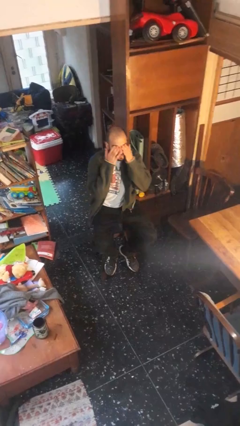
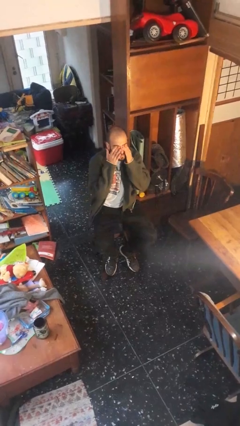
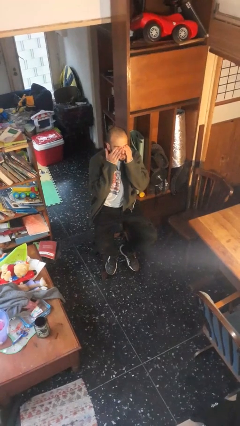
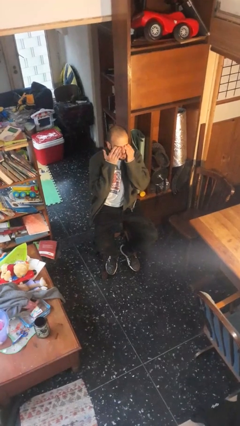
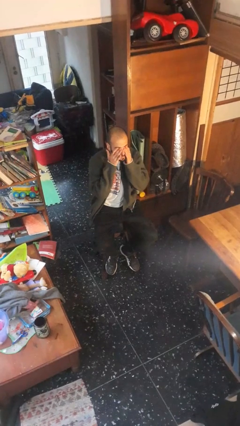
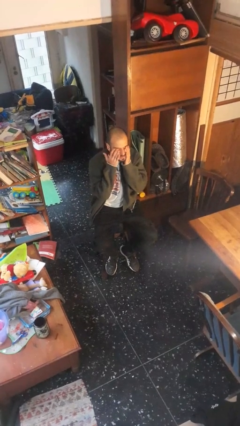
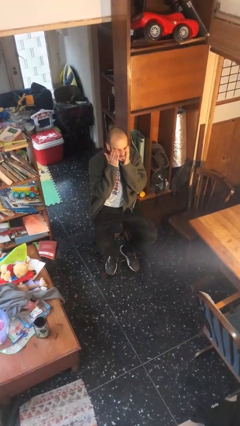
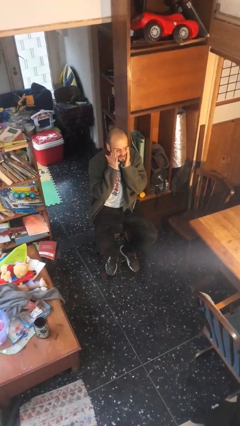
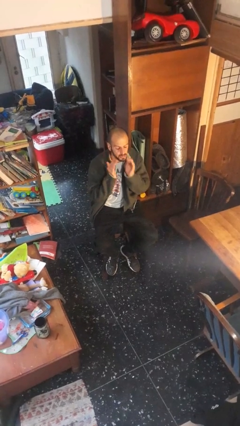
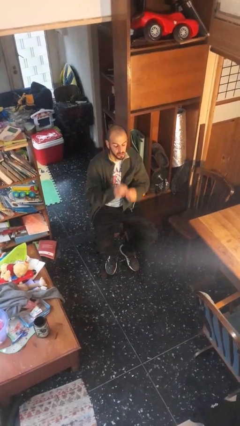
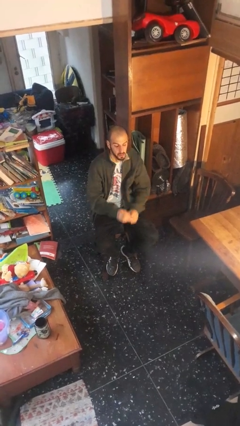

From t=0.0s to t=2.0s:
person rubs eyes

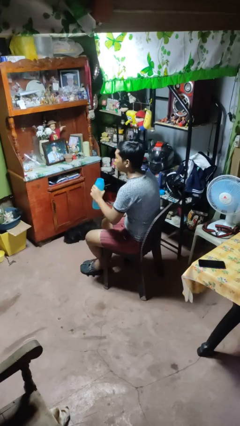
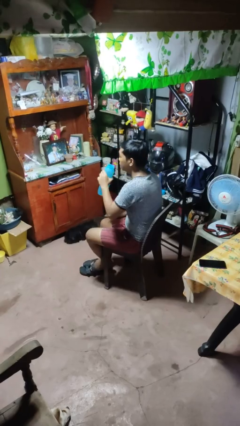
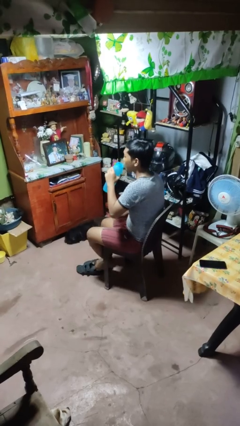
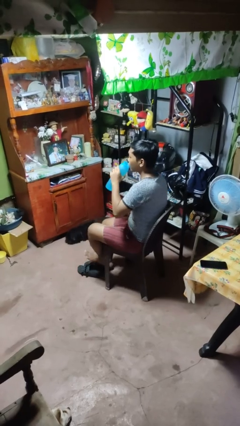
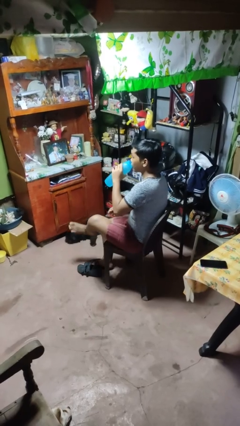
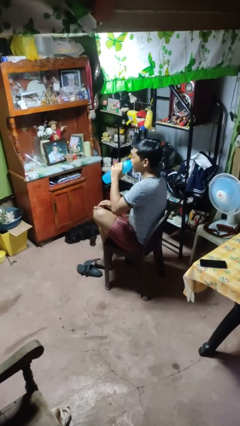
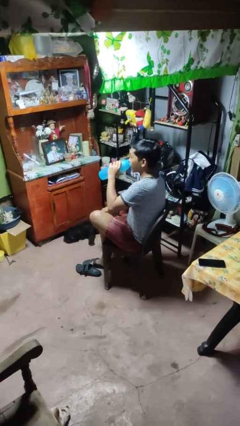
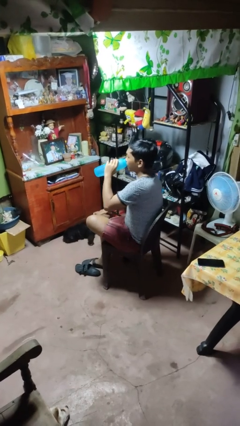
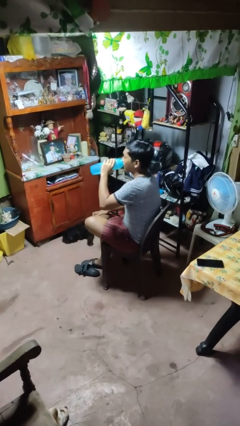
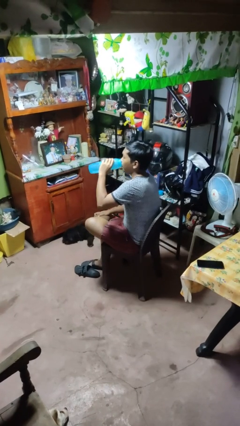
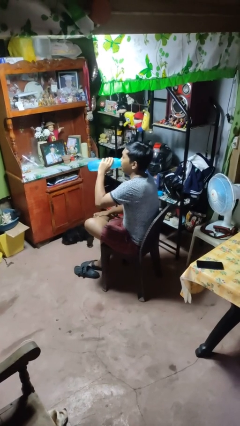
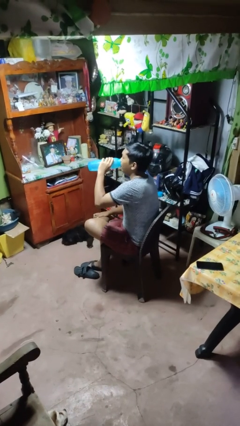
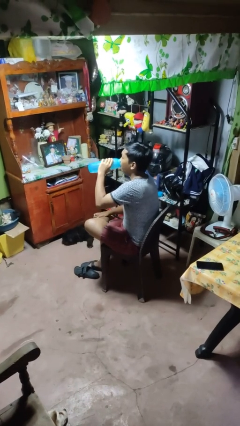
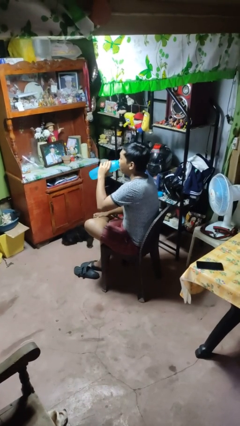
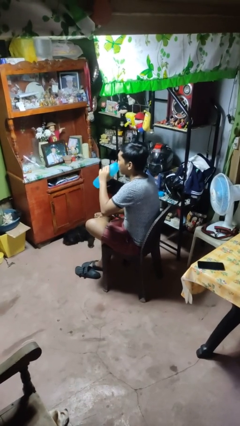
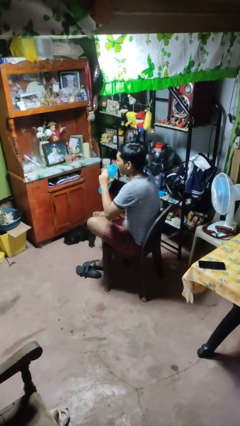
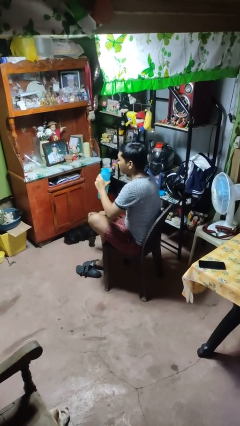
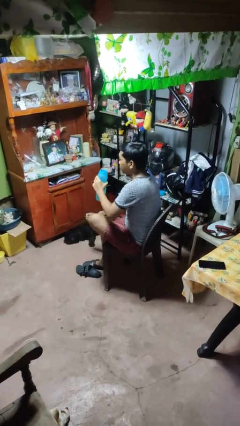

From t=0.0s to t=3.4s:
person drinks from bottle

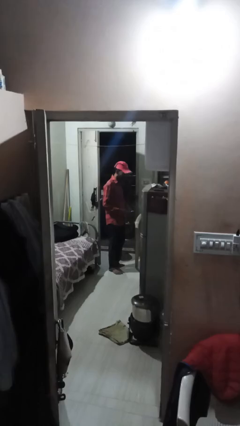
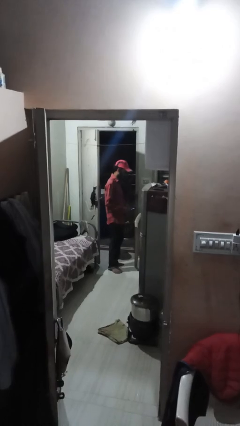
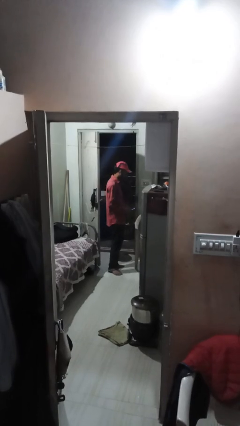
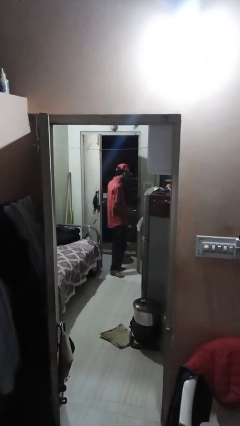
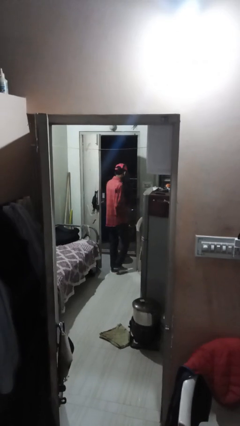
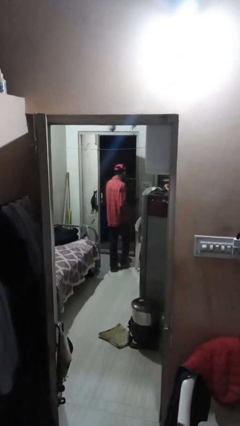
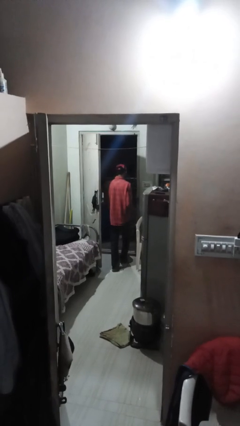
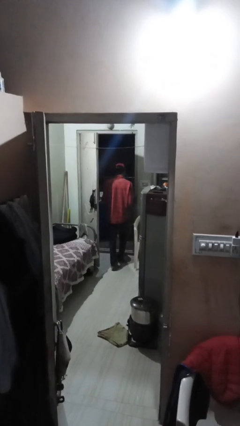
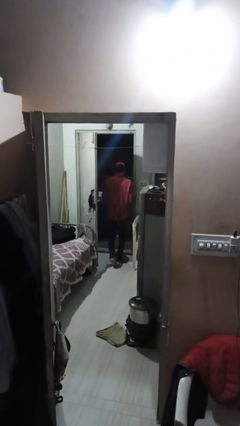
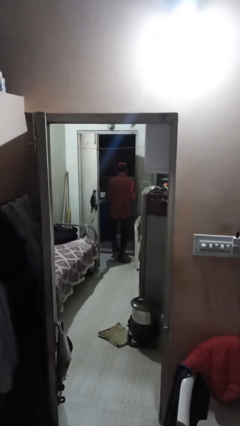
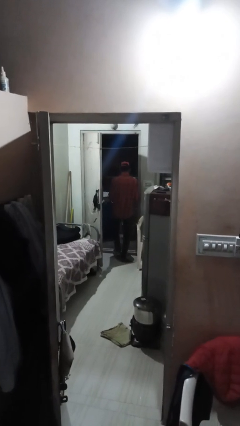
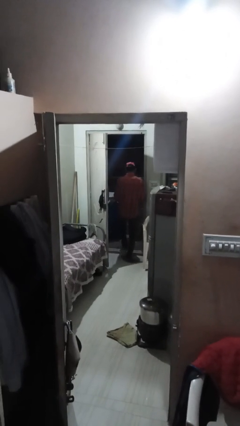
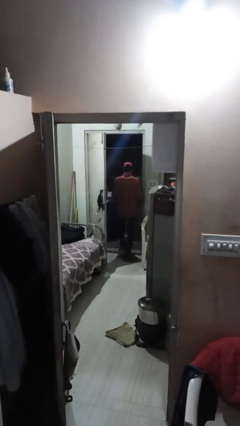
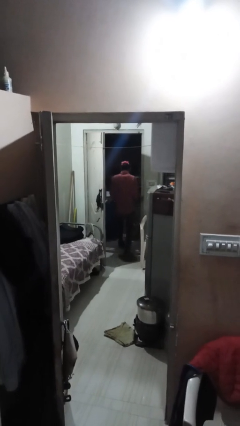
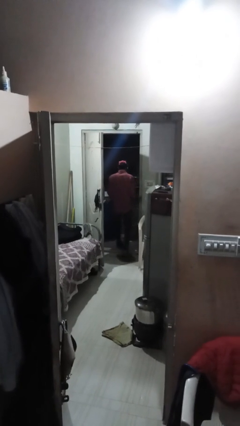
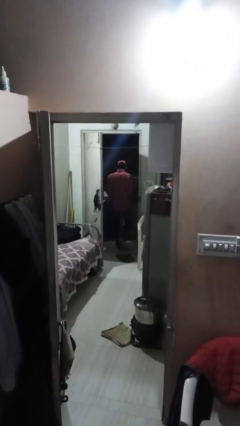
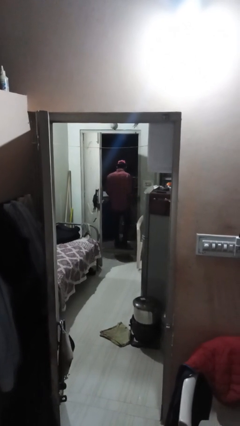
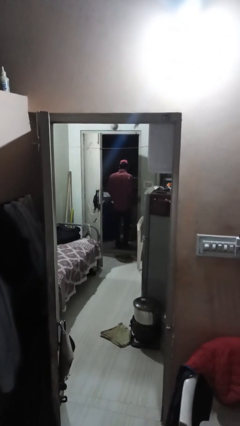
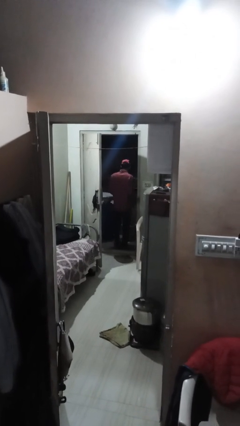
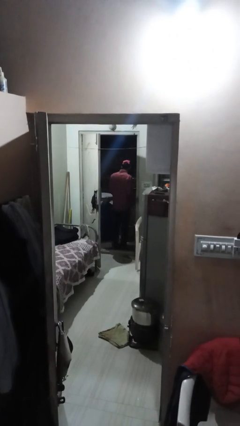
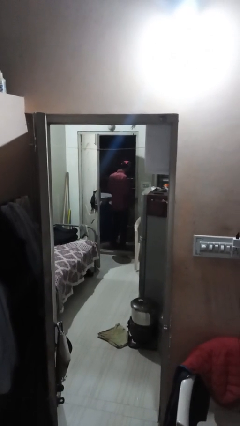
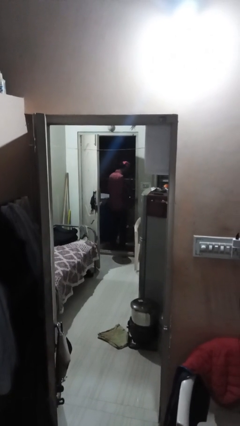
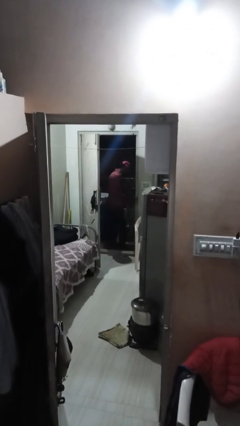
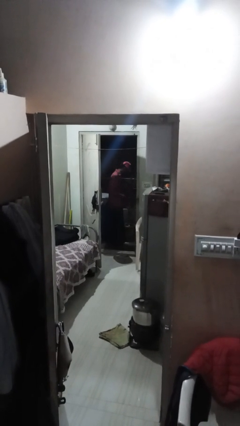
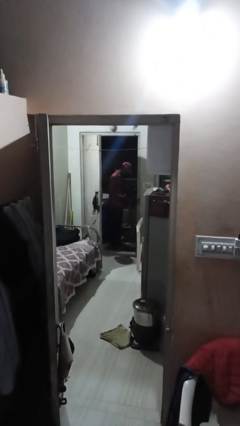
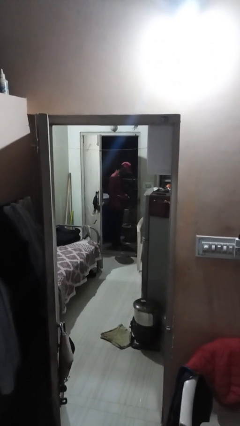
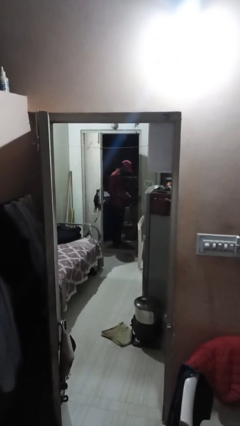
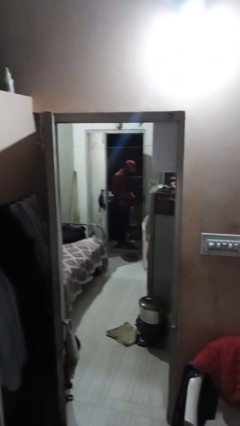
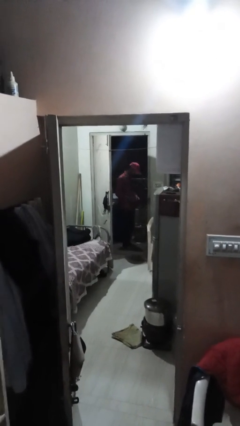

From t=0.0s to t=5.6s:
person exits scene through structure

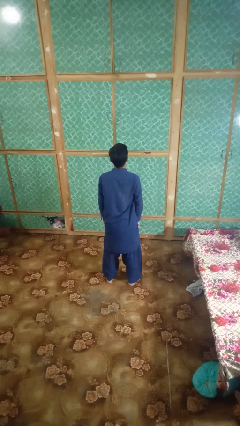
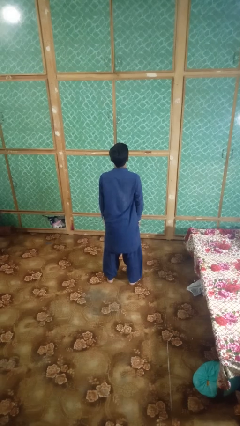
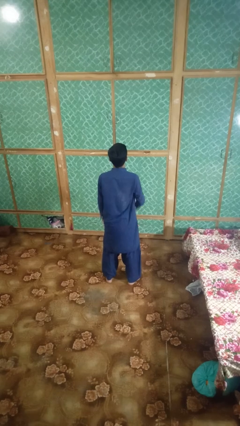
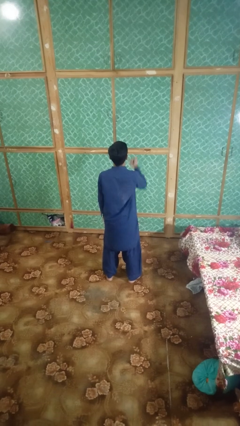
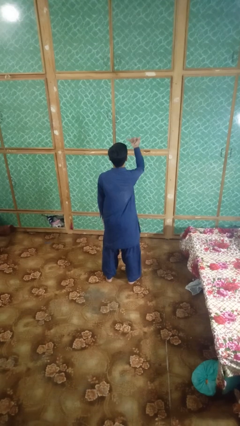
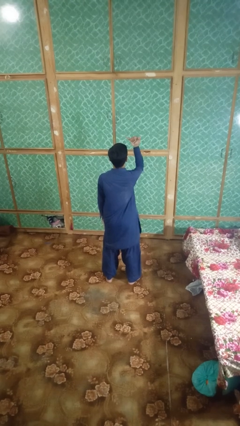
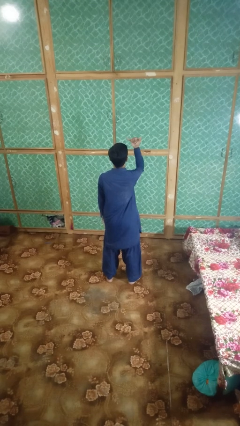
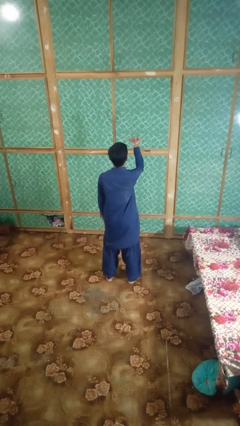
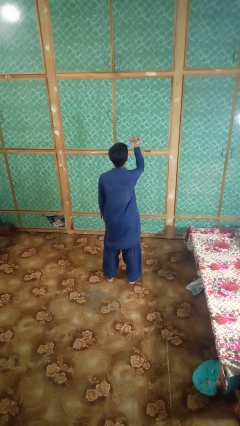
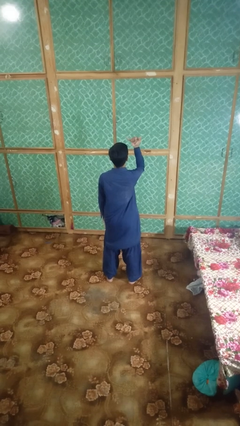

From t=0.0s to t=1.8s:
person gestures hang loose

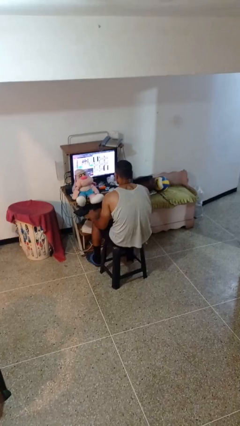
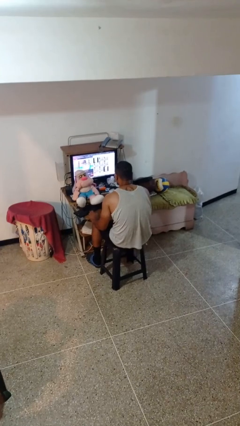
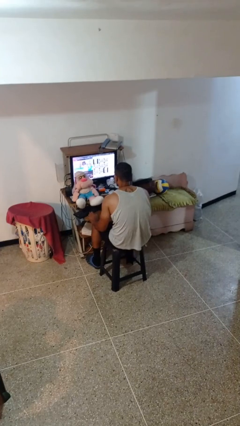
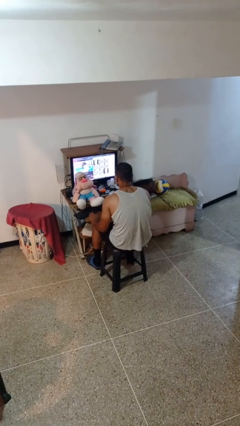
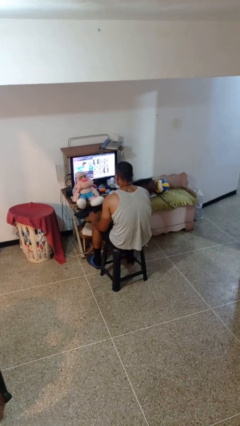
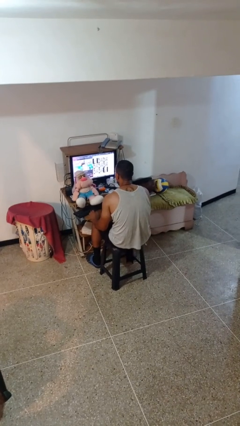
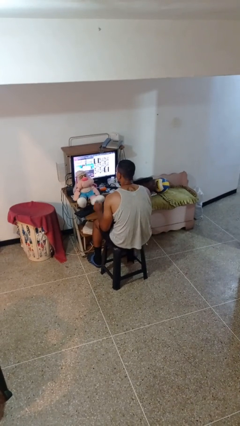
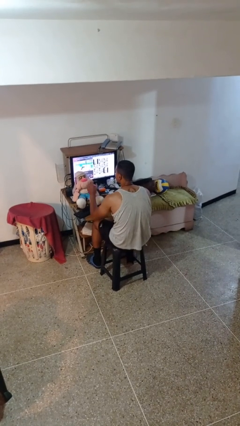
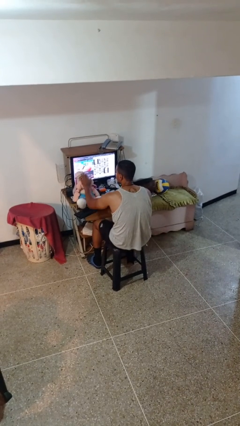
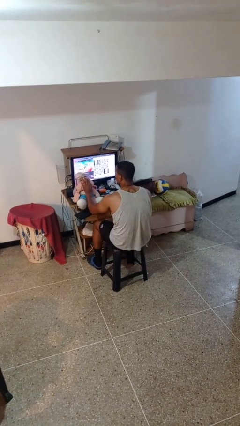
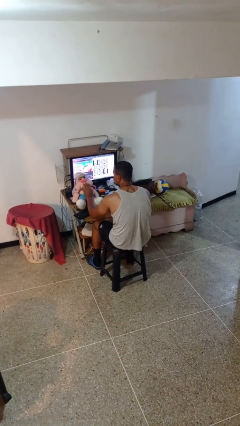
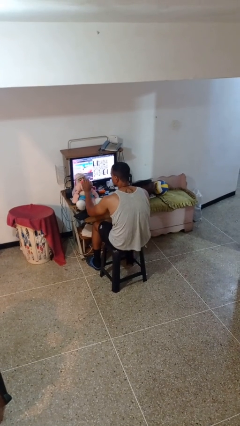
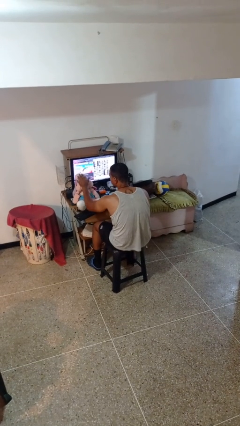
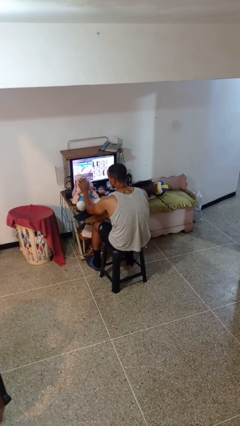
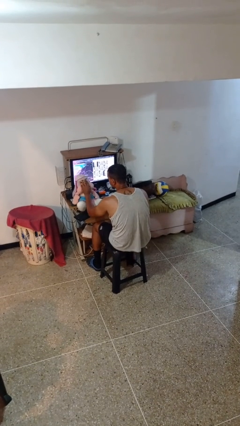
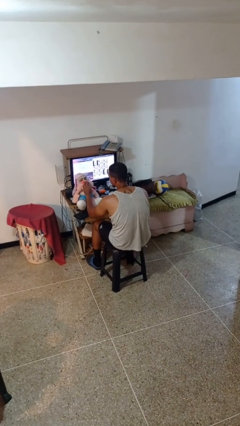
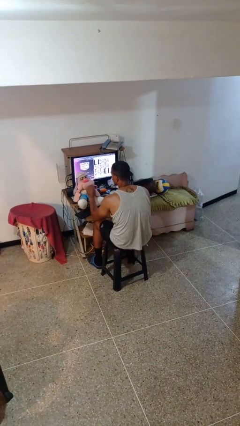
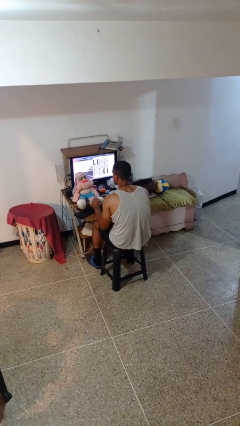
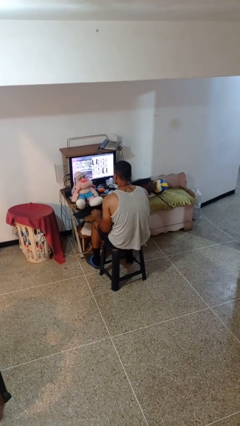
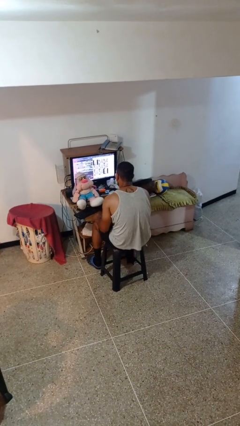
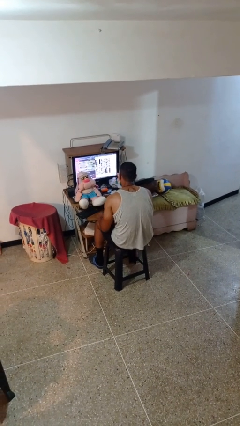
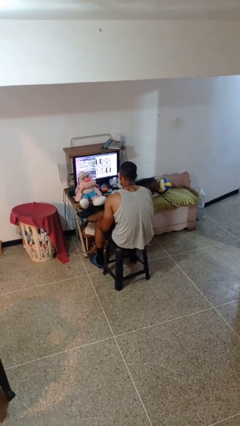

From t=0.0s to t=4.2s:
person waves hand over object

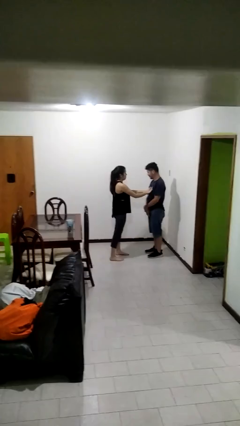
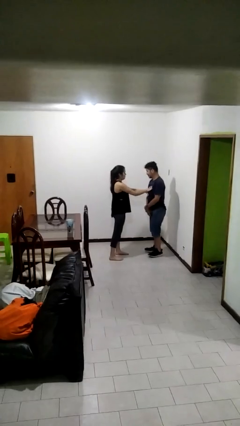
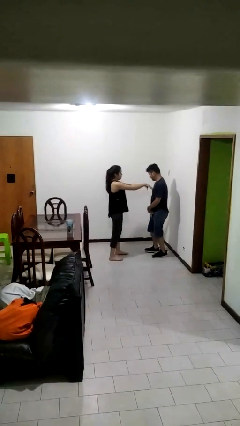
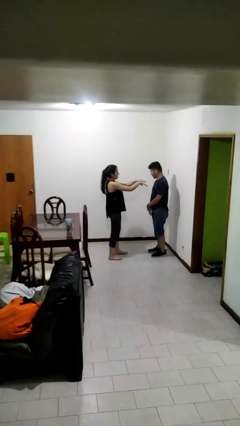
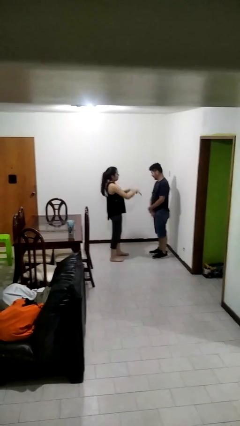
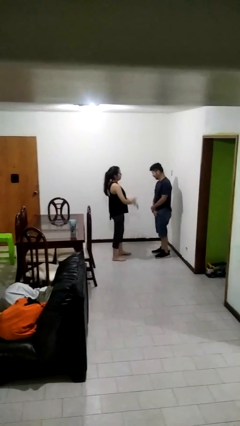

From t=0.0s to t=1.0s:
person shoves person
